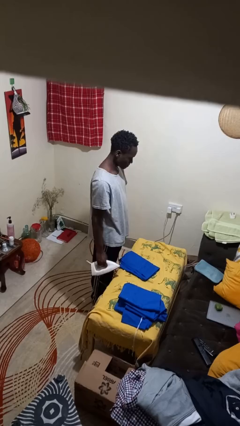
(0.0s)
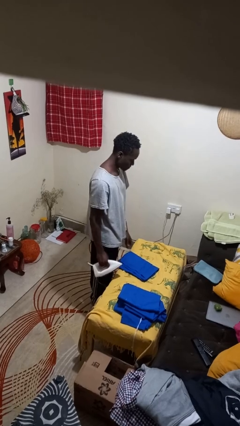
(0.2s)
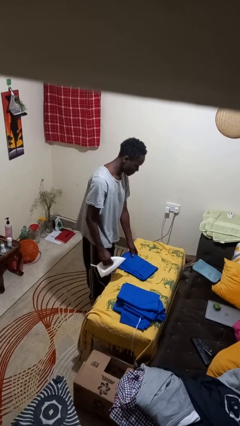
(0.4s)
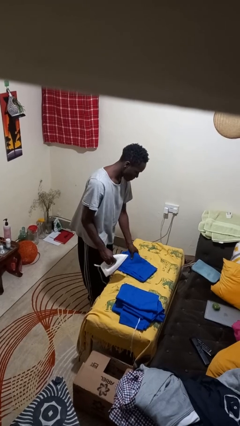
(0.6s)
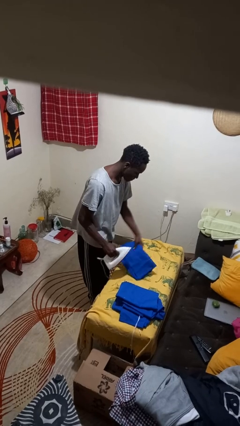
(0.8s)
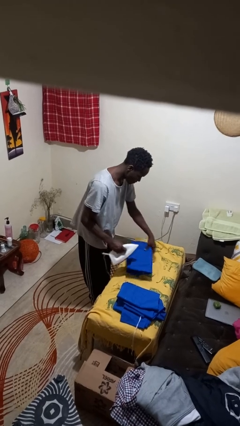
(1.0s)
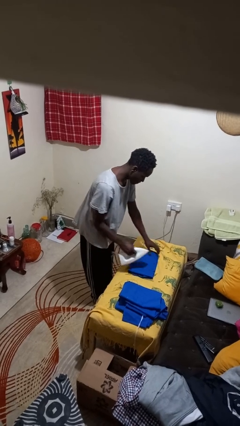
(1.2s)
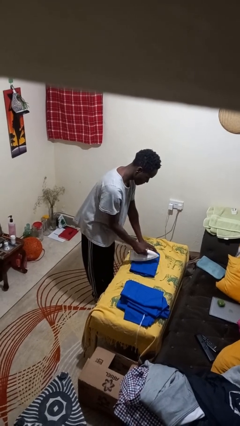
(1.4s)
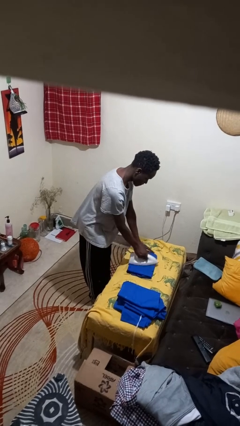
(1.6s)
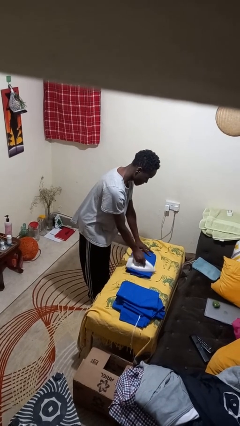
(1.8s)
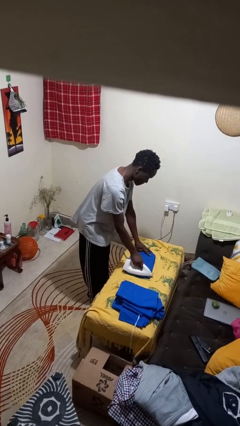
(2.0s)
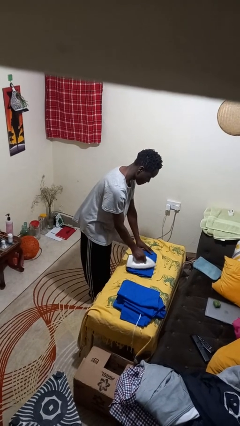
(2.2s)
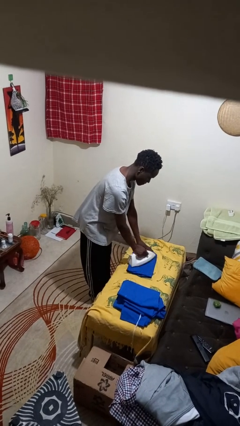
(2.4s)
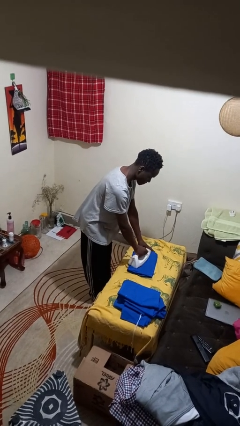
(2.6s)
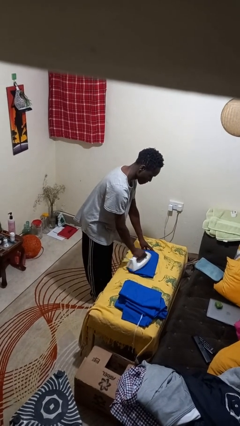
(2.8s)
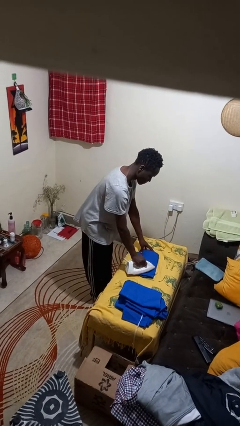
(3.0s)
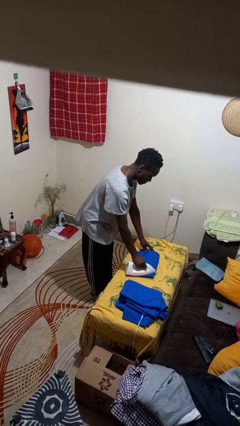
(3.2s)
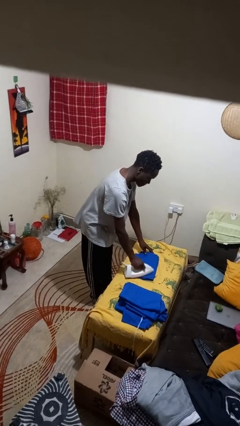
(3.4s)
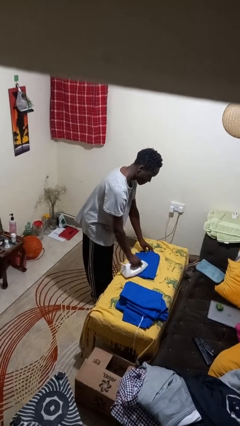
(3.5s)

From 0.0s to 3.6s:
person irons clothes

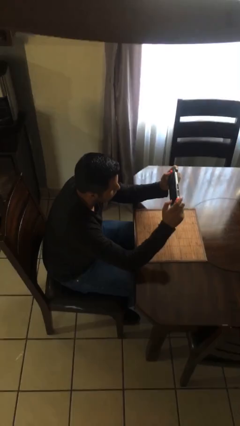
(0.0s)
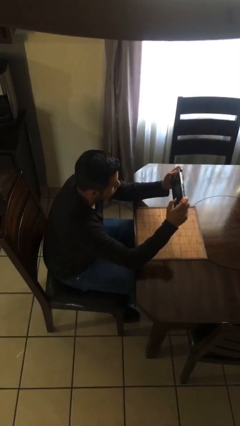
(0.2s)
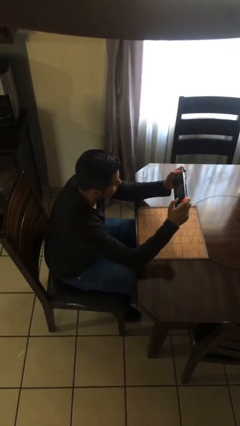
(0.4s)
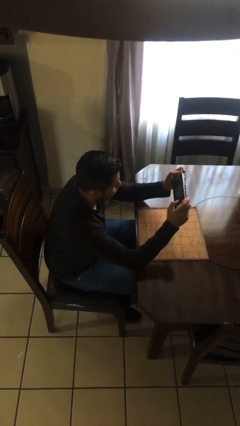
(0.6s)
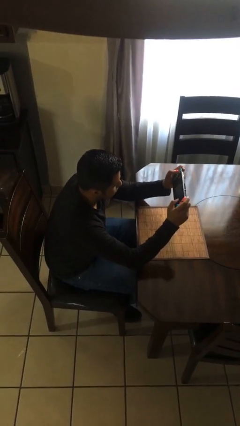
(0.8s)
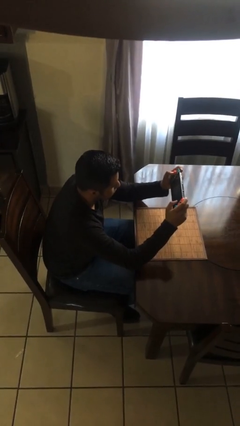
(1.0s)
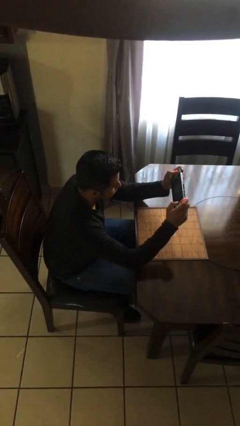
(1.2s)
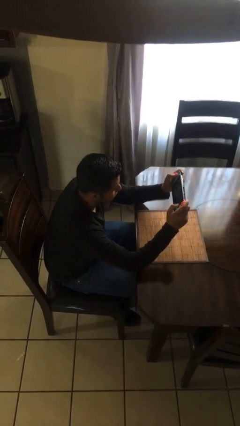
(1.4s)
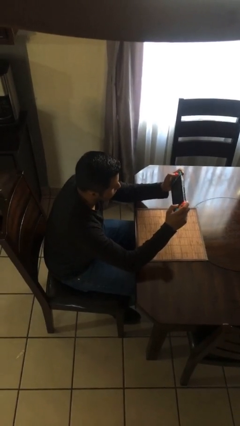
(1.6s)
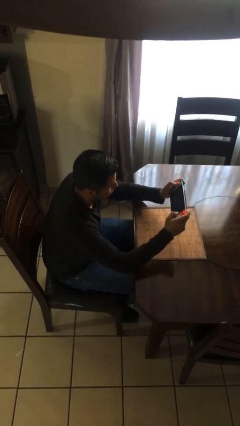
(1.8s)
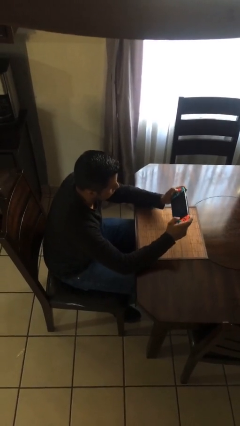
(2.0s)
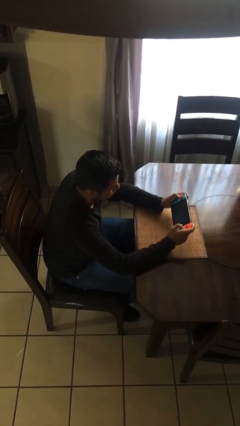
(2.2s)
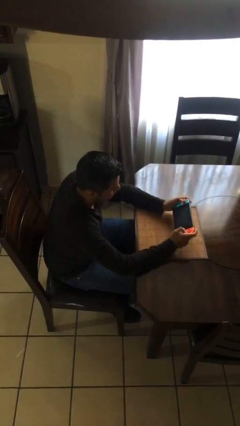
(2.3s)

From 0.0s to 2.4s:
person interacts with handheld game

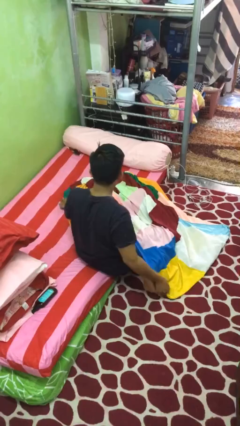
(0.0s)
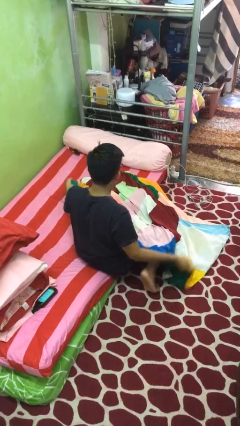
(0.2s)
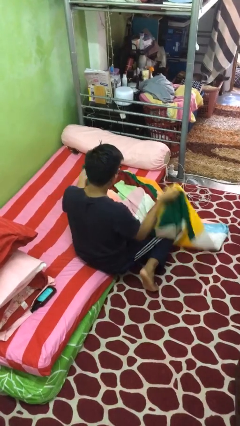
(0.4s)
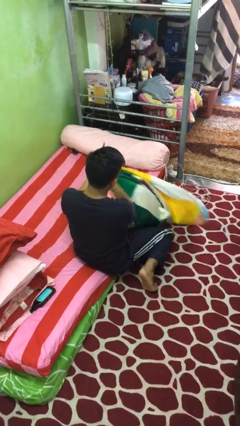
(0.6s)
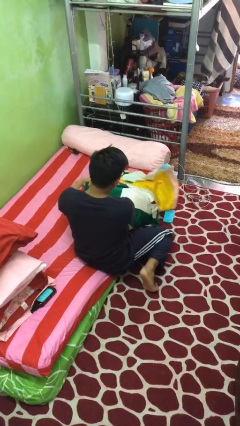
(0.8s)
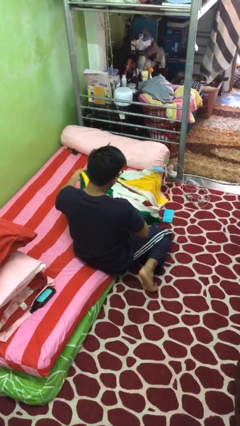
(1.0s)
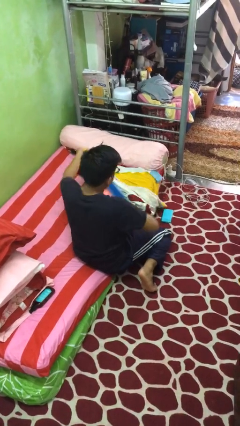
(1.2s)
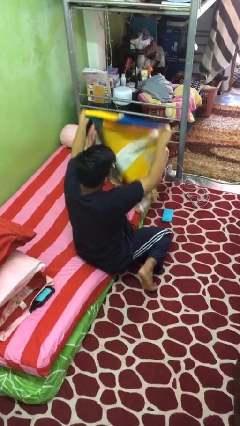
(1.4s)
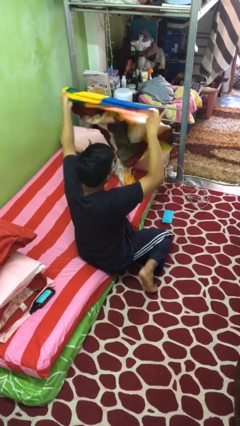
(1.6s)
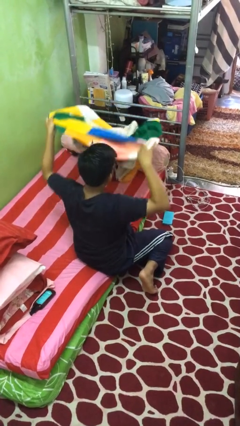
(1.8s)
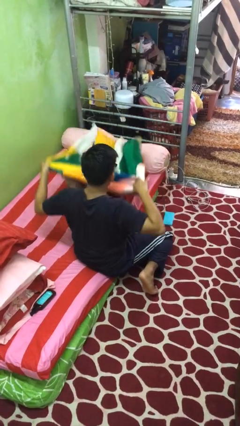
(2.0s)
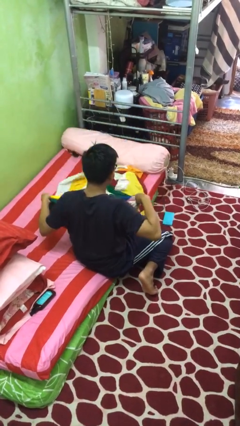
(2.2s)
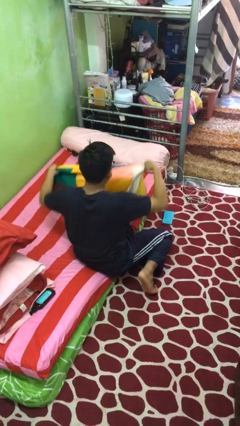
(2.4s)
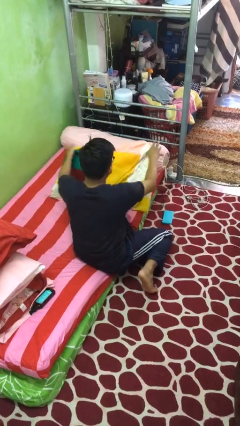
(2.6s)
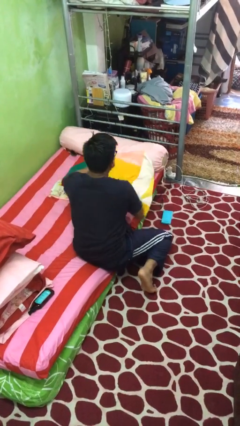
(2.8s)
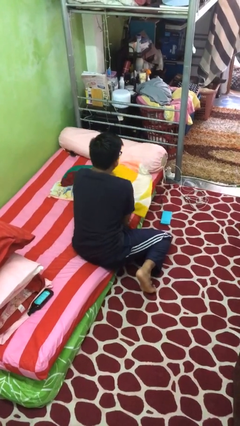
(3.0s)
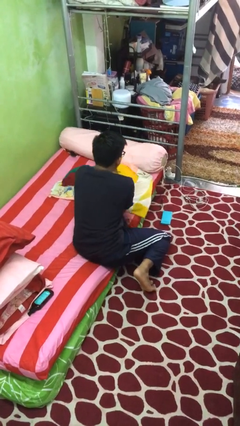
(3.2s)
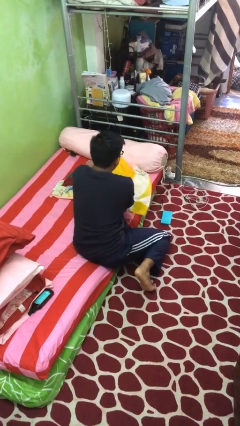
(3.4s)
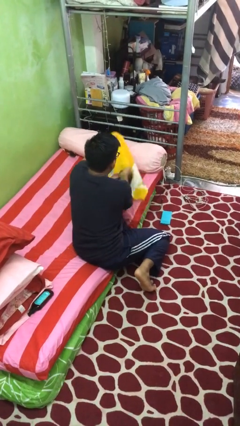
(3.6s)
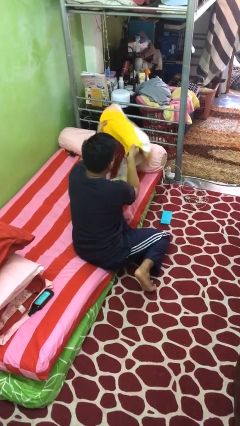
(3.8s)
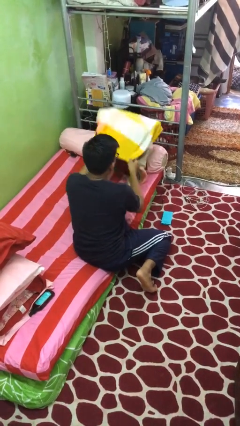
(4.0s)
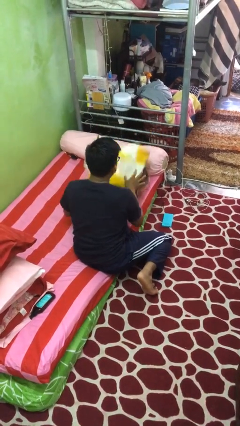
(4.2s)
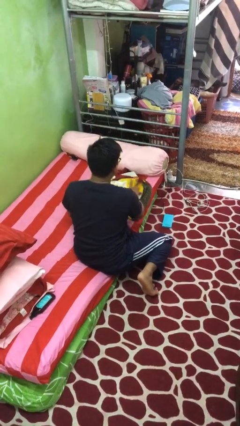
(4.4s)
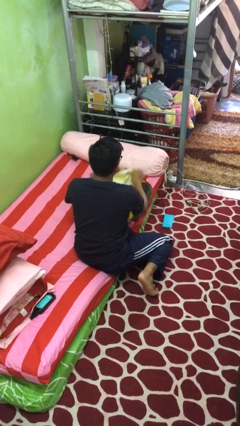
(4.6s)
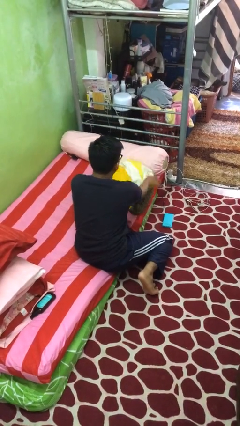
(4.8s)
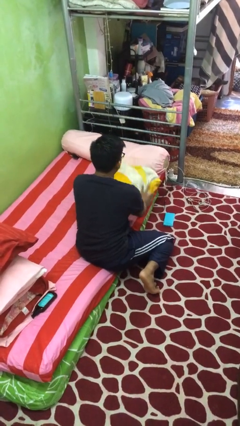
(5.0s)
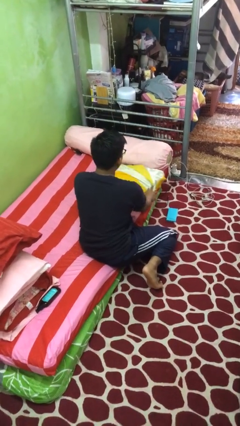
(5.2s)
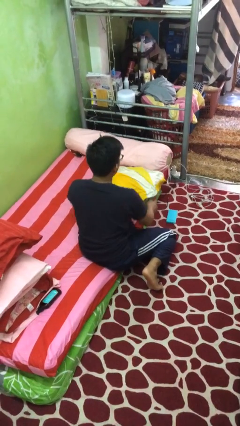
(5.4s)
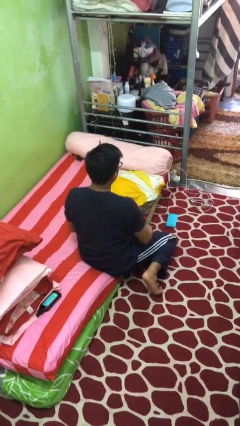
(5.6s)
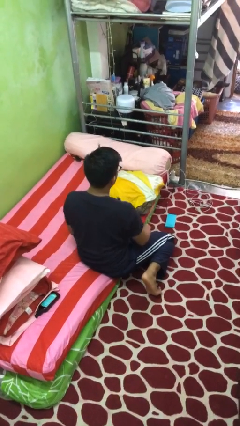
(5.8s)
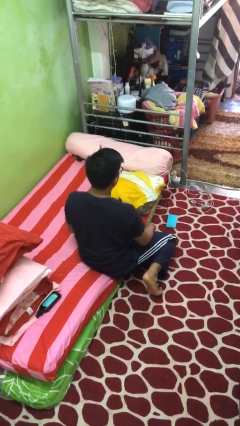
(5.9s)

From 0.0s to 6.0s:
person folds blanket

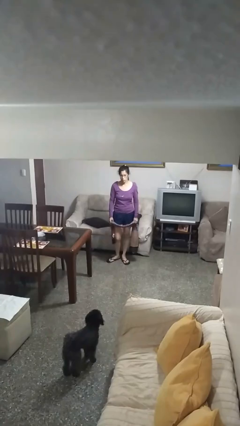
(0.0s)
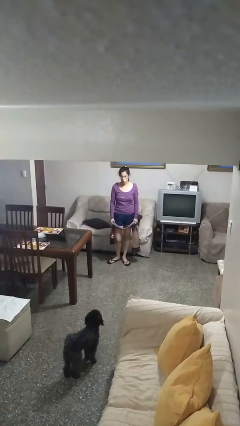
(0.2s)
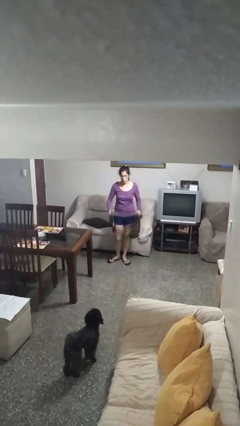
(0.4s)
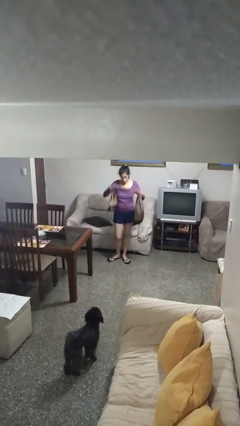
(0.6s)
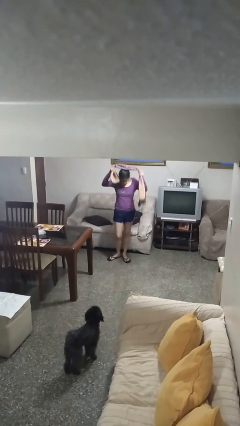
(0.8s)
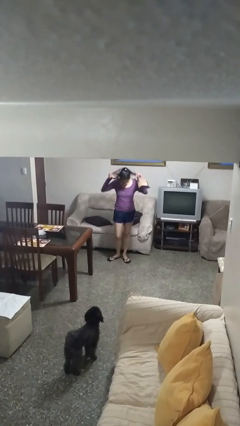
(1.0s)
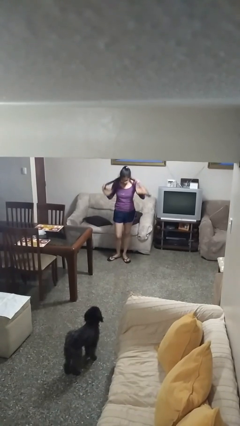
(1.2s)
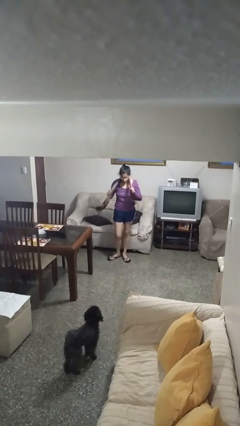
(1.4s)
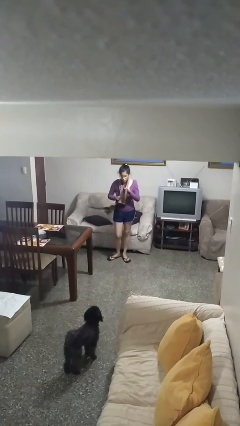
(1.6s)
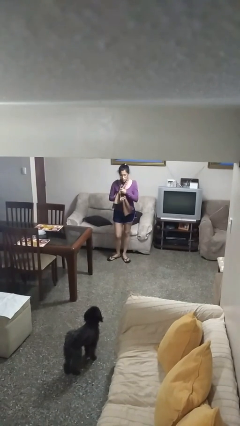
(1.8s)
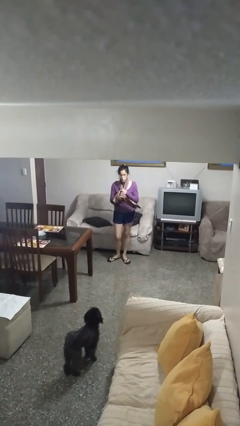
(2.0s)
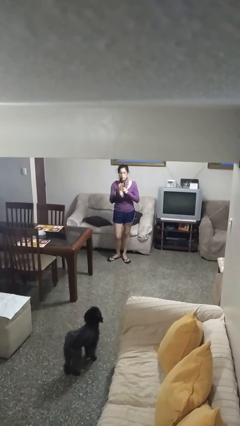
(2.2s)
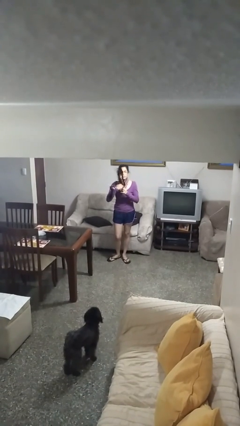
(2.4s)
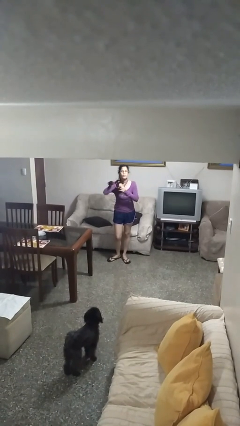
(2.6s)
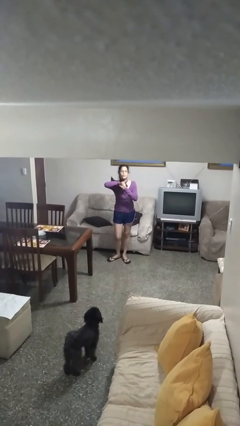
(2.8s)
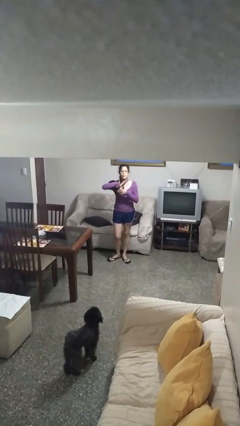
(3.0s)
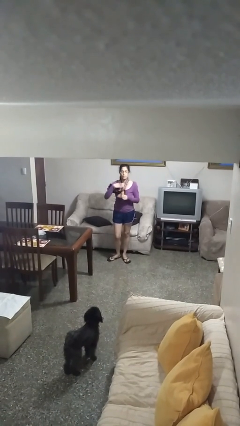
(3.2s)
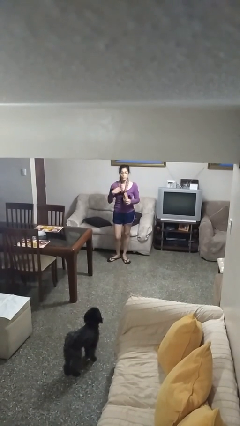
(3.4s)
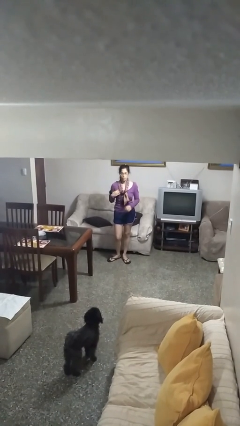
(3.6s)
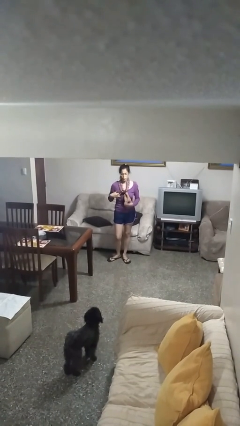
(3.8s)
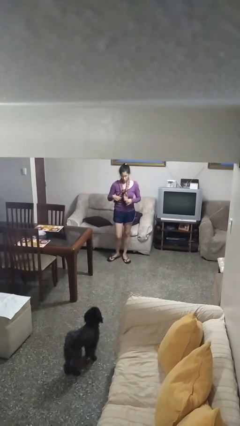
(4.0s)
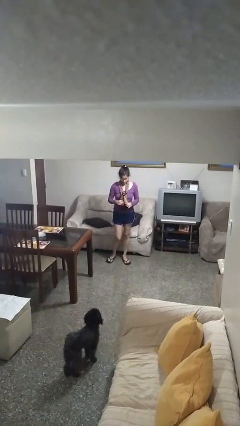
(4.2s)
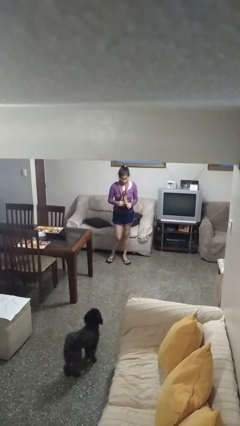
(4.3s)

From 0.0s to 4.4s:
person puts on scarf

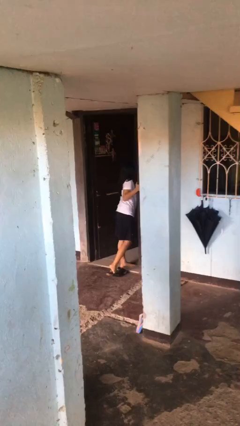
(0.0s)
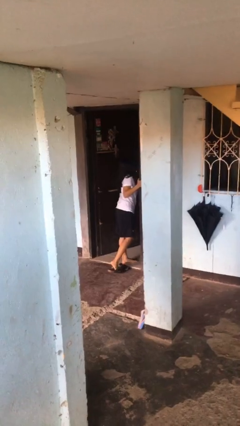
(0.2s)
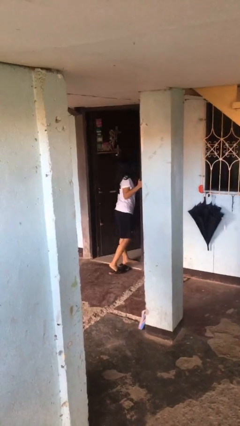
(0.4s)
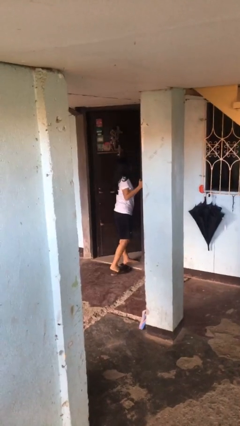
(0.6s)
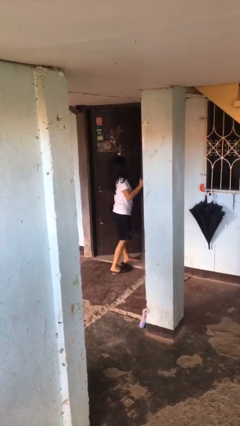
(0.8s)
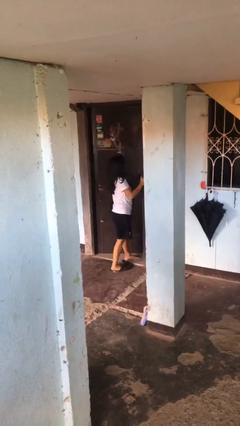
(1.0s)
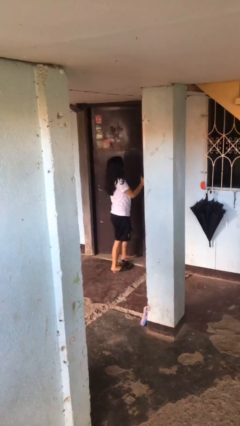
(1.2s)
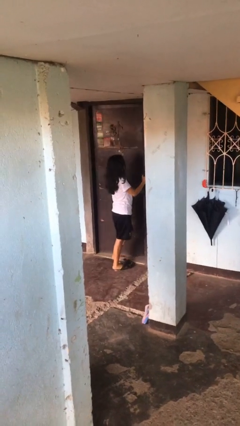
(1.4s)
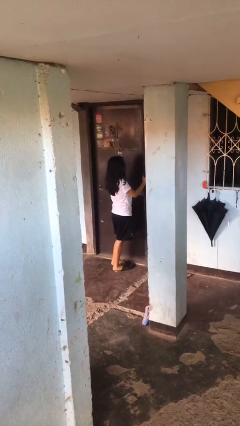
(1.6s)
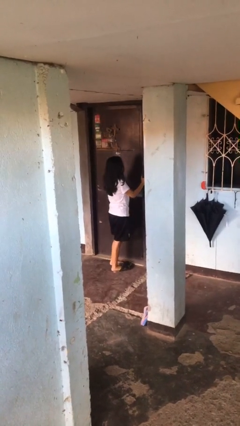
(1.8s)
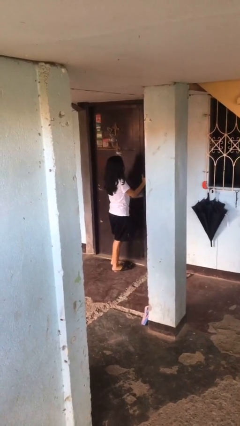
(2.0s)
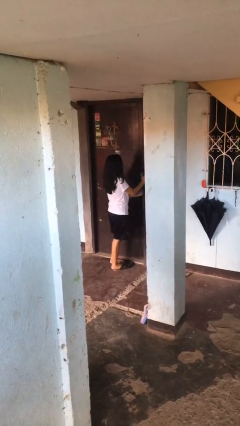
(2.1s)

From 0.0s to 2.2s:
person closes facility door
